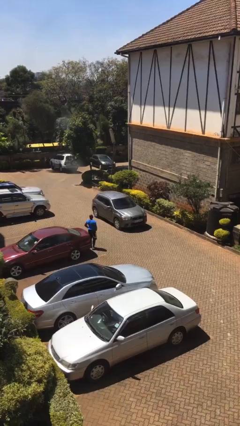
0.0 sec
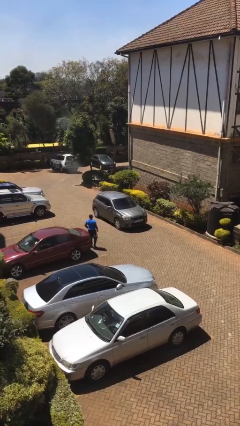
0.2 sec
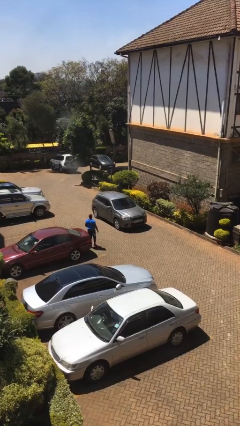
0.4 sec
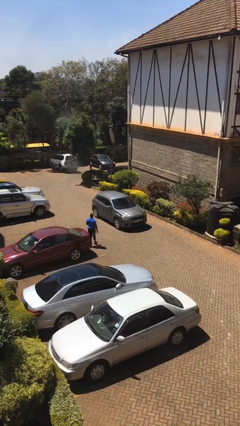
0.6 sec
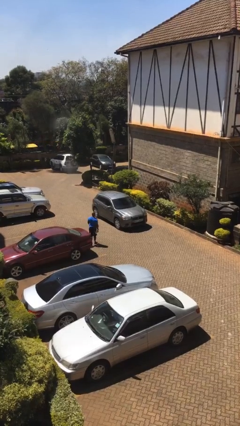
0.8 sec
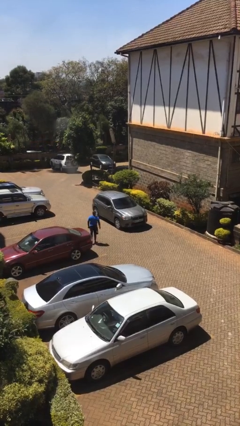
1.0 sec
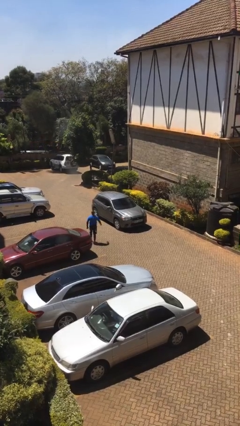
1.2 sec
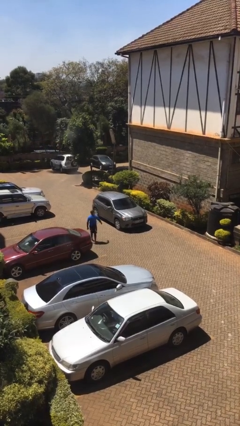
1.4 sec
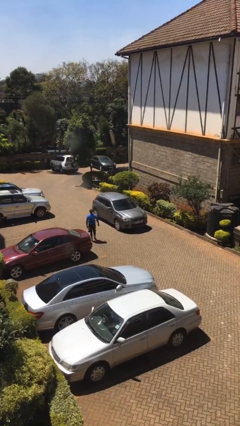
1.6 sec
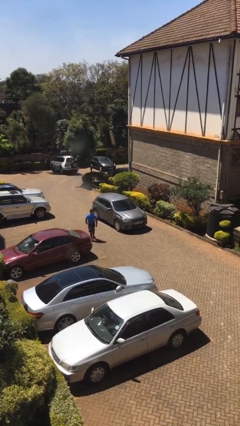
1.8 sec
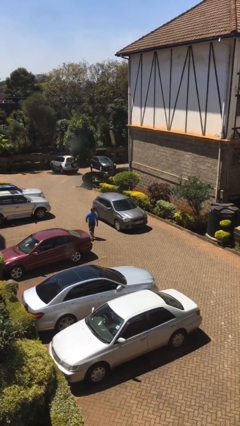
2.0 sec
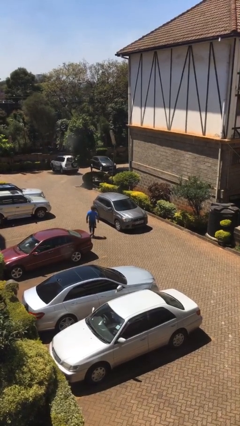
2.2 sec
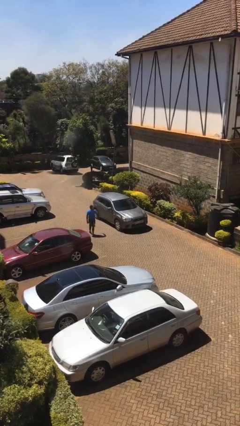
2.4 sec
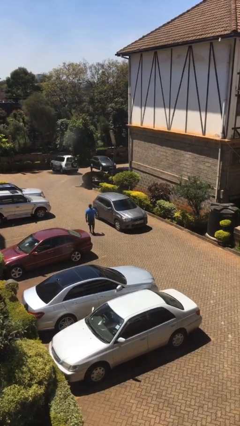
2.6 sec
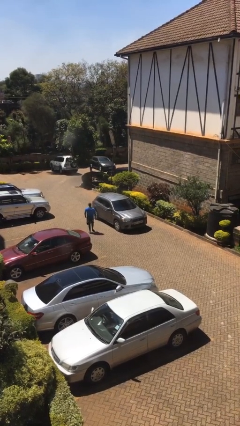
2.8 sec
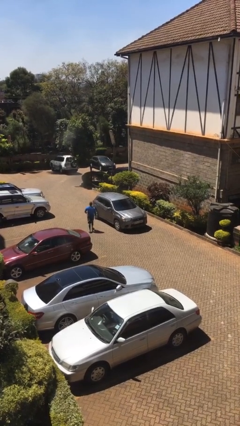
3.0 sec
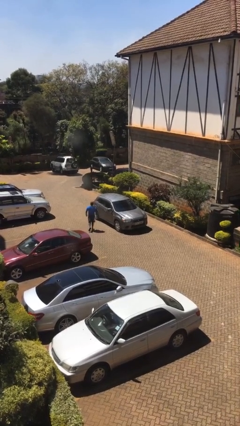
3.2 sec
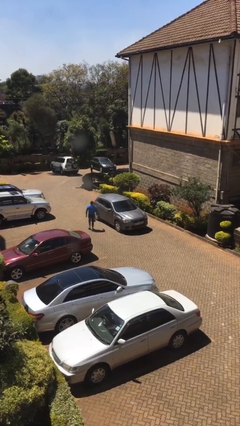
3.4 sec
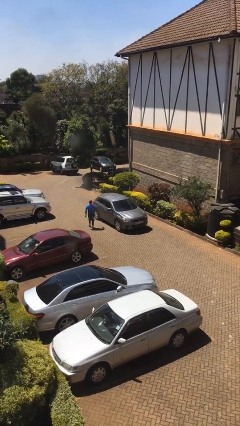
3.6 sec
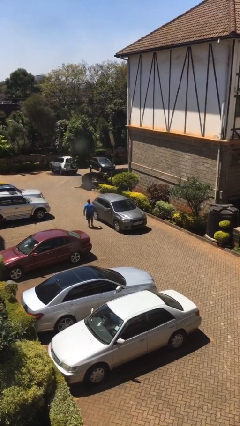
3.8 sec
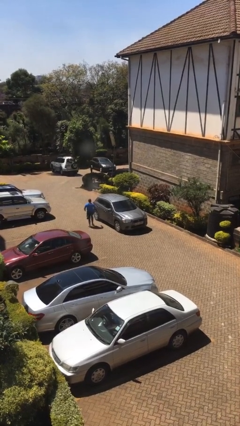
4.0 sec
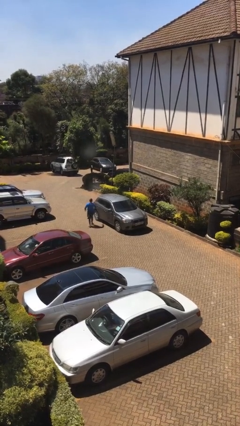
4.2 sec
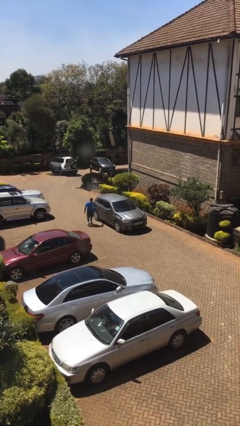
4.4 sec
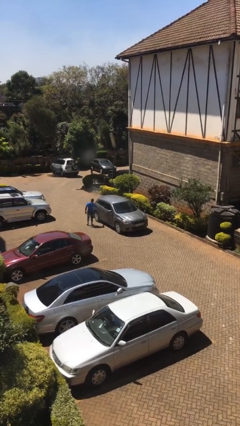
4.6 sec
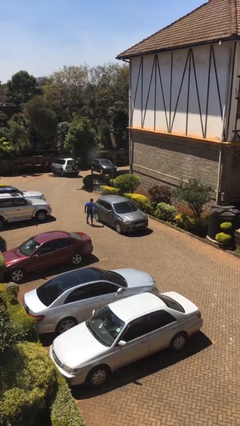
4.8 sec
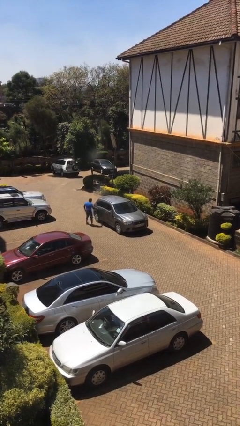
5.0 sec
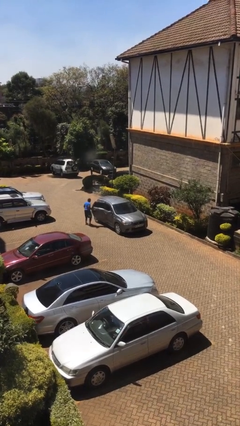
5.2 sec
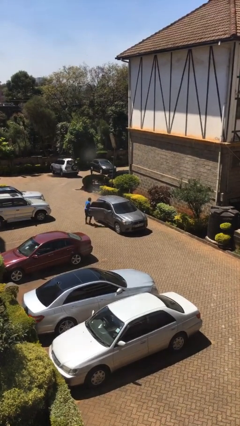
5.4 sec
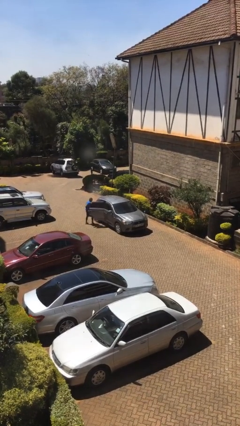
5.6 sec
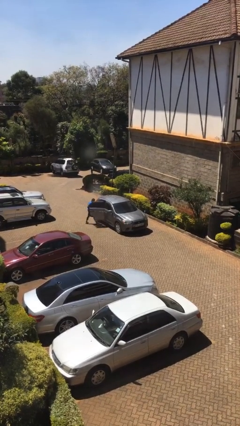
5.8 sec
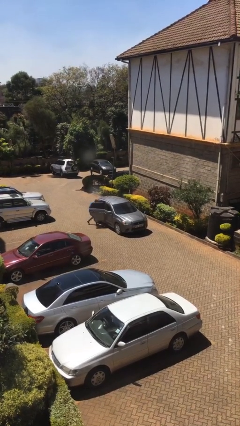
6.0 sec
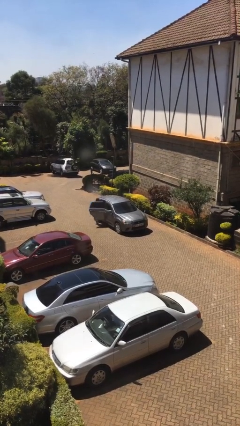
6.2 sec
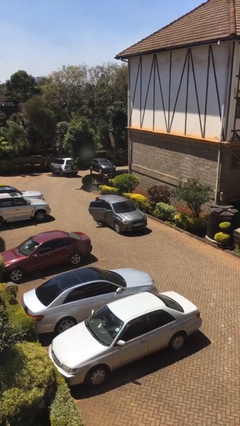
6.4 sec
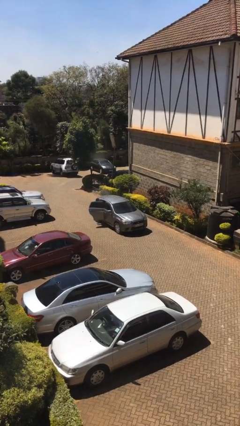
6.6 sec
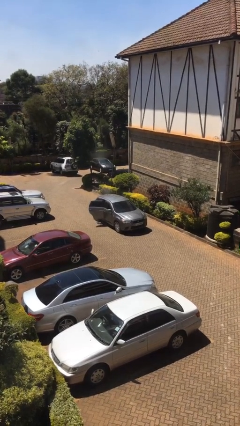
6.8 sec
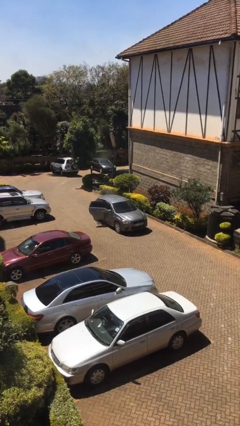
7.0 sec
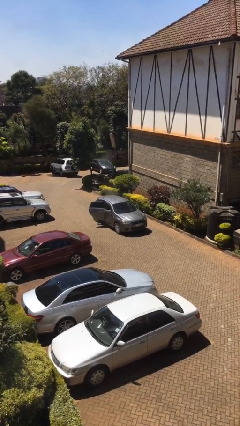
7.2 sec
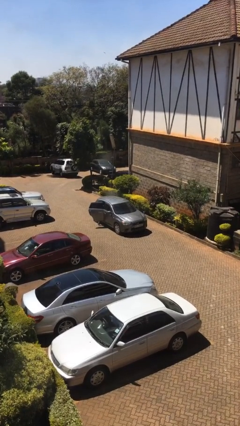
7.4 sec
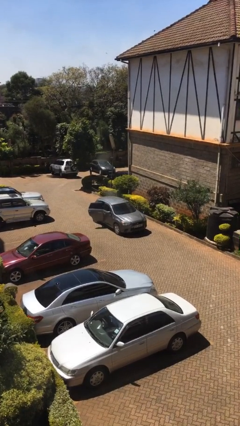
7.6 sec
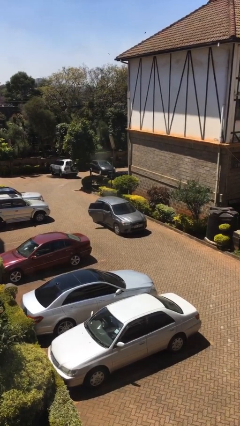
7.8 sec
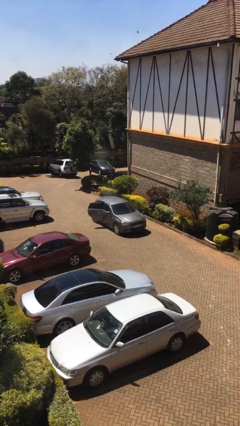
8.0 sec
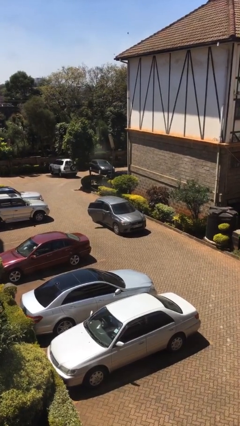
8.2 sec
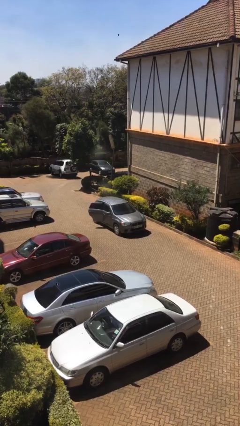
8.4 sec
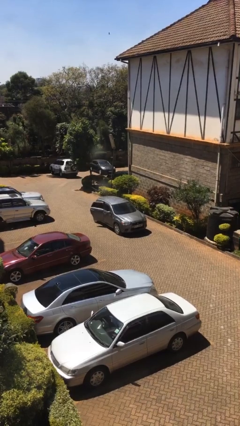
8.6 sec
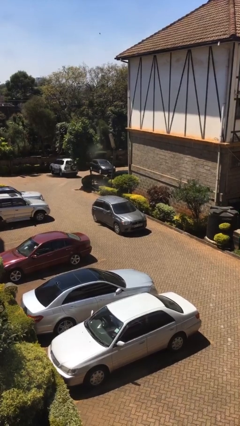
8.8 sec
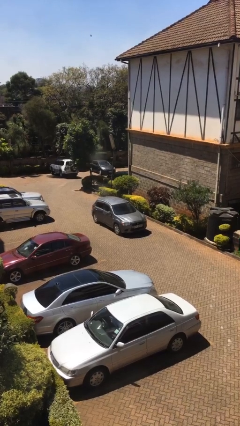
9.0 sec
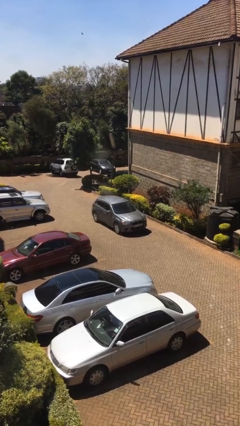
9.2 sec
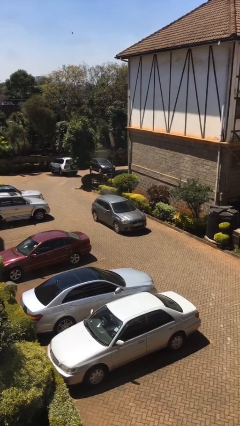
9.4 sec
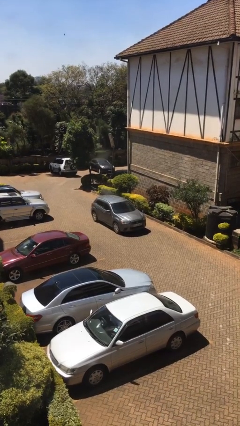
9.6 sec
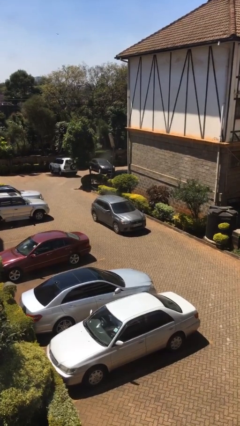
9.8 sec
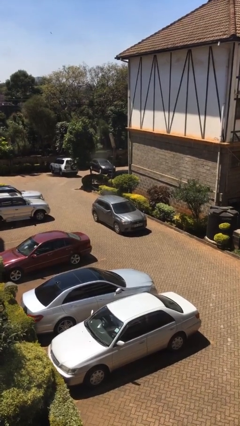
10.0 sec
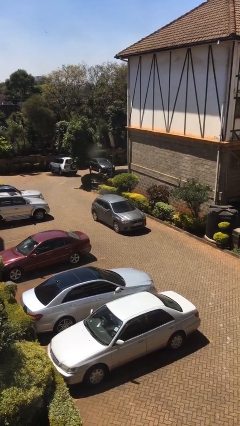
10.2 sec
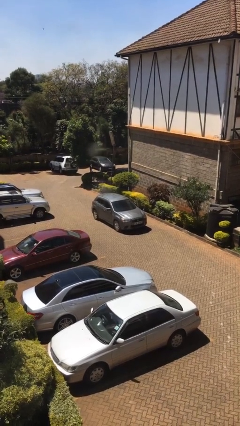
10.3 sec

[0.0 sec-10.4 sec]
car picks up person

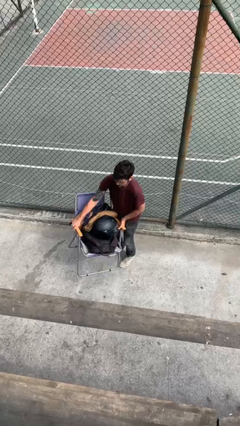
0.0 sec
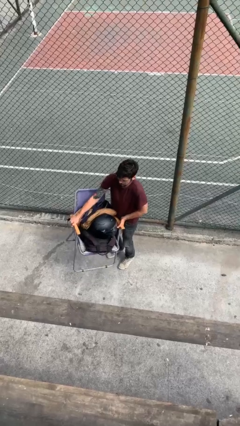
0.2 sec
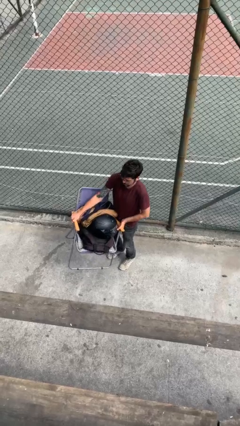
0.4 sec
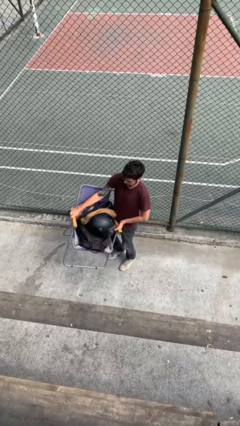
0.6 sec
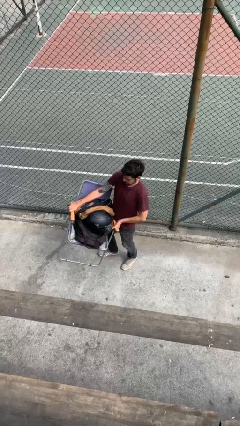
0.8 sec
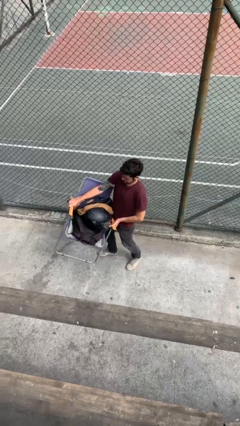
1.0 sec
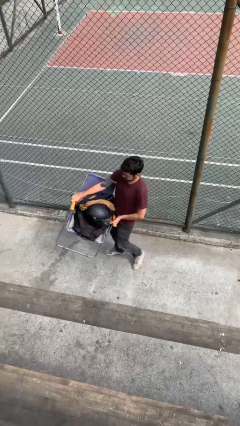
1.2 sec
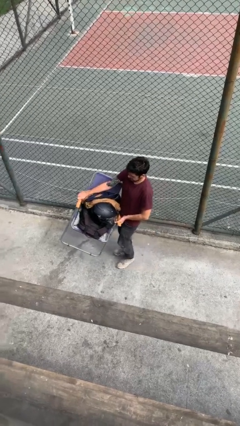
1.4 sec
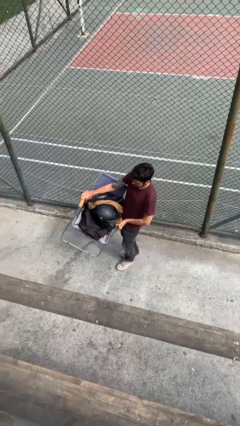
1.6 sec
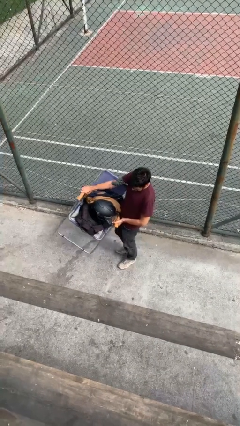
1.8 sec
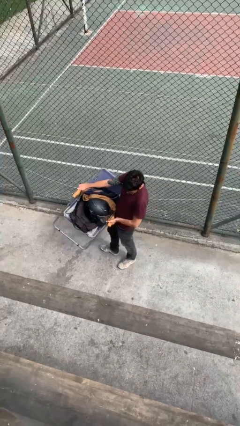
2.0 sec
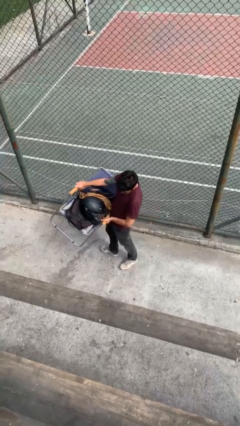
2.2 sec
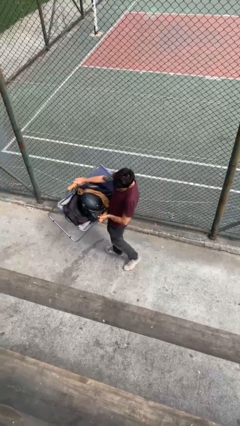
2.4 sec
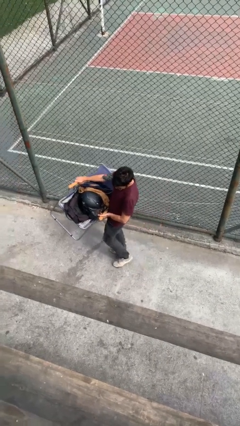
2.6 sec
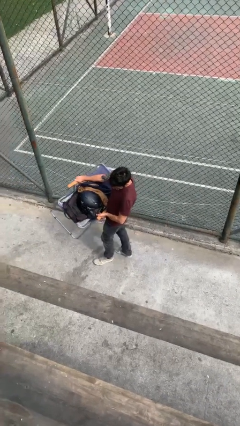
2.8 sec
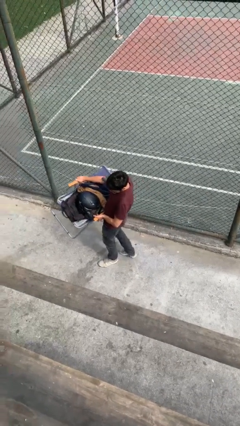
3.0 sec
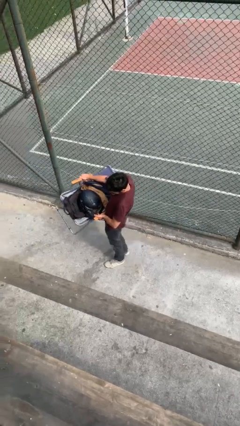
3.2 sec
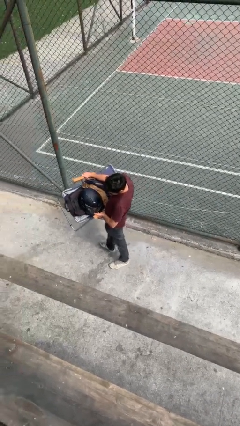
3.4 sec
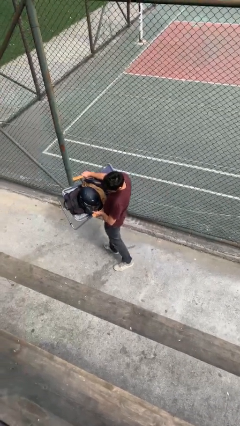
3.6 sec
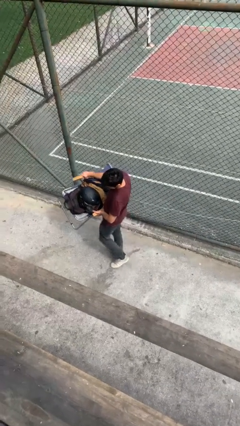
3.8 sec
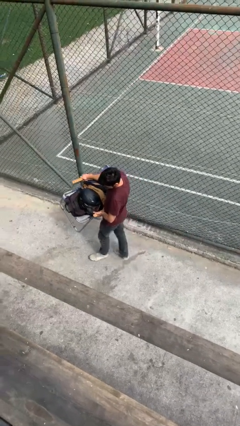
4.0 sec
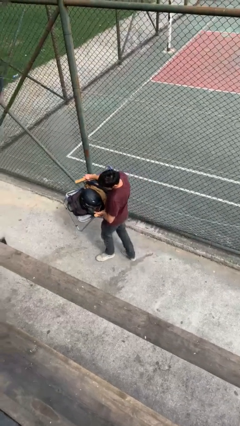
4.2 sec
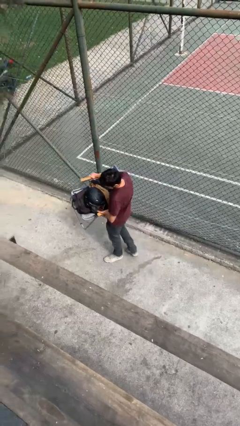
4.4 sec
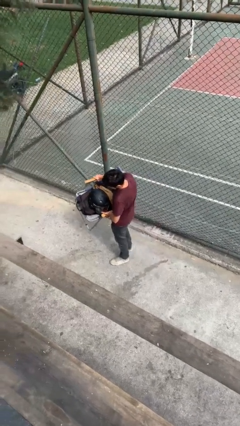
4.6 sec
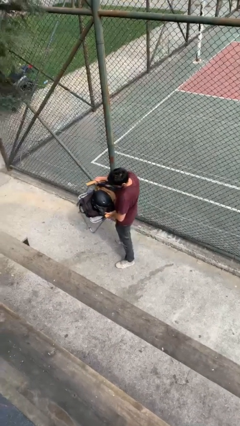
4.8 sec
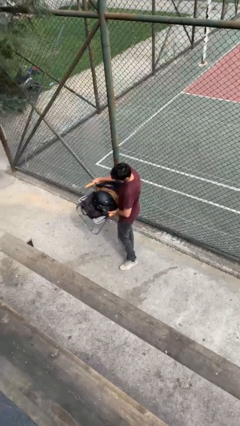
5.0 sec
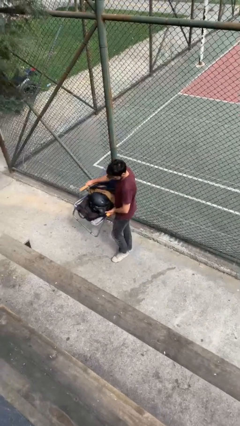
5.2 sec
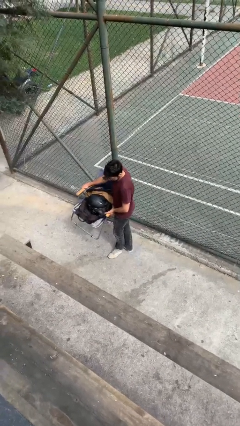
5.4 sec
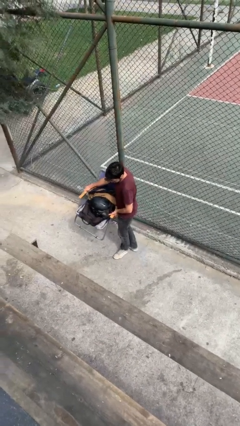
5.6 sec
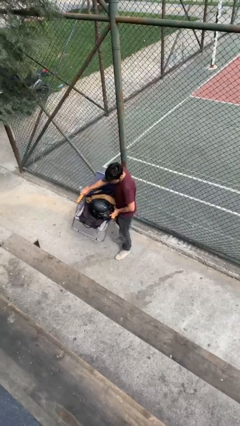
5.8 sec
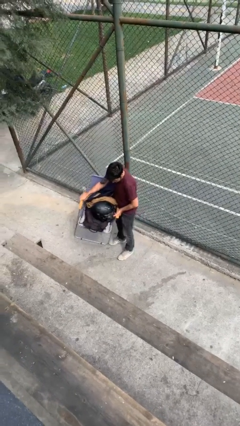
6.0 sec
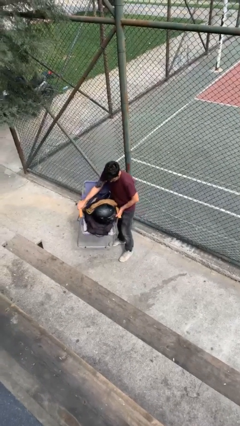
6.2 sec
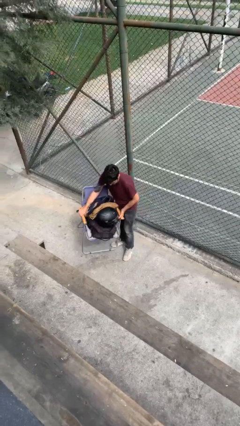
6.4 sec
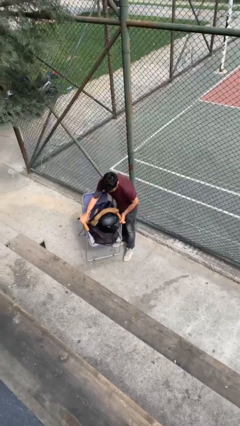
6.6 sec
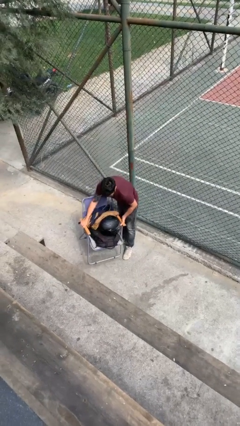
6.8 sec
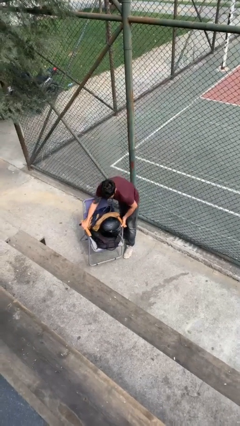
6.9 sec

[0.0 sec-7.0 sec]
person carries heavy object

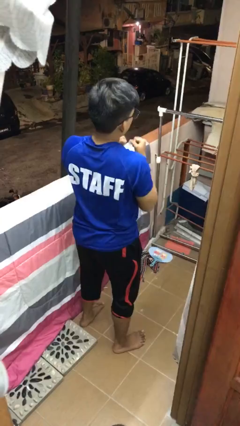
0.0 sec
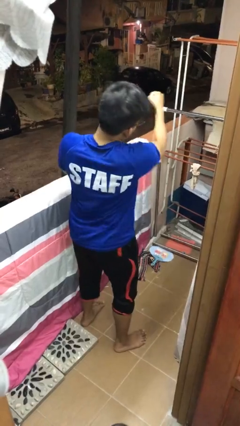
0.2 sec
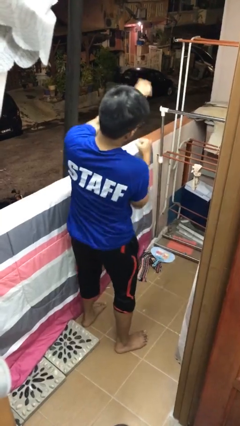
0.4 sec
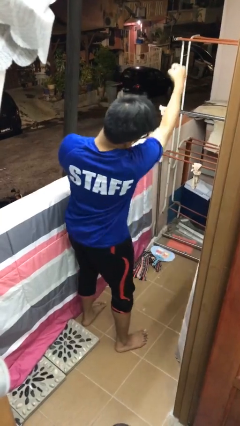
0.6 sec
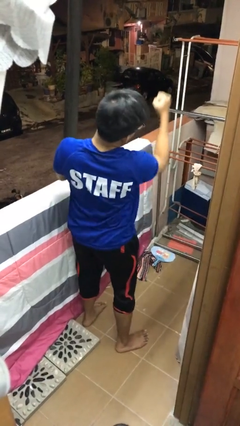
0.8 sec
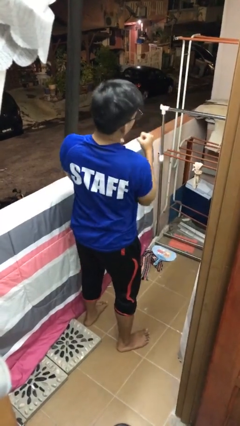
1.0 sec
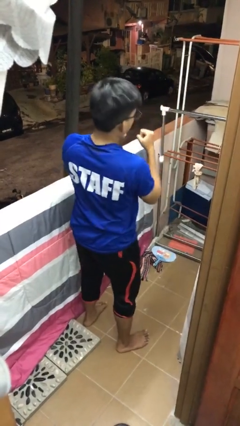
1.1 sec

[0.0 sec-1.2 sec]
person punches
